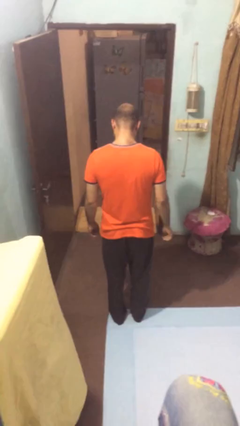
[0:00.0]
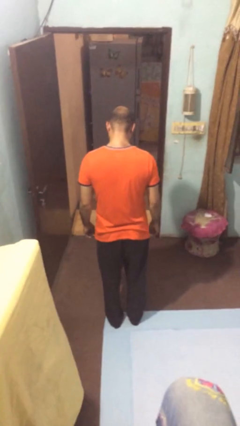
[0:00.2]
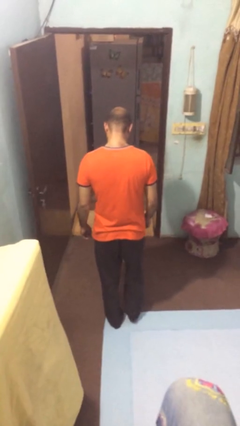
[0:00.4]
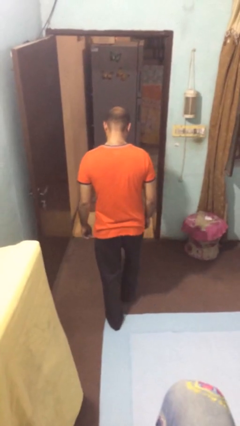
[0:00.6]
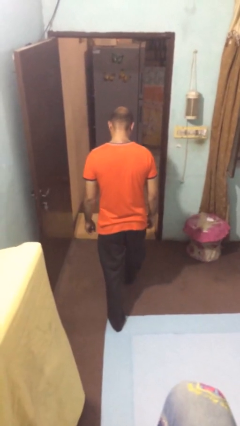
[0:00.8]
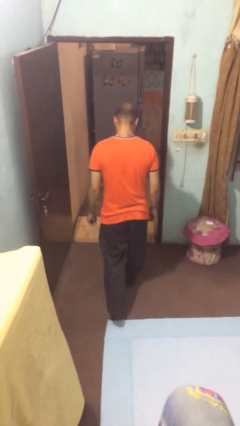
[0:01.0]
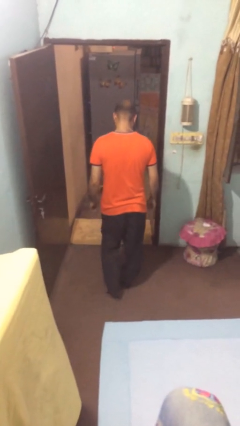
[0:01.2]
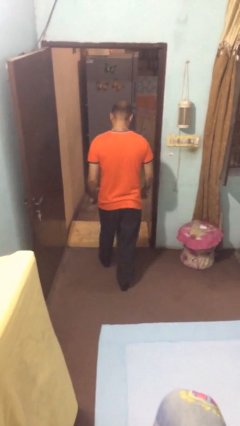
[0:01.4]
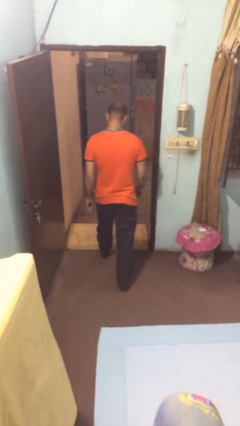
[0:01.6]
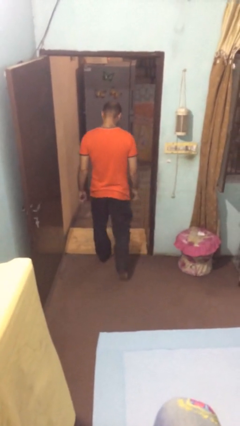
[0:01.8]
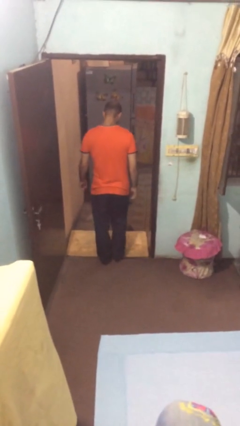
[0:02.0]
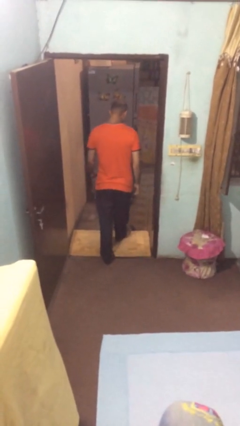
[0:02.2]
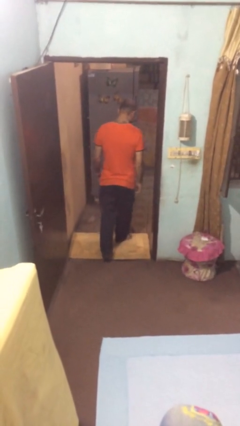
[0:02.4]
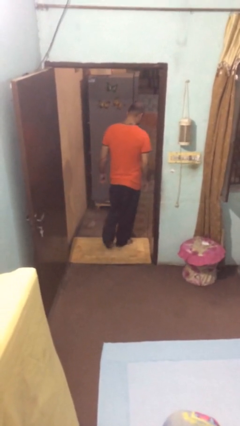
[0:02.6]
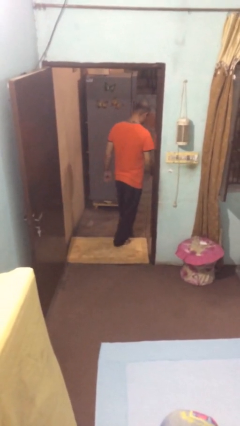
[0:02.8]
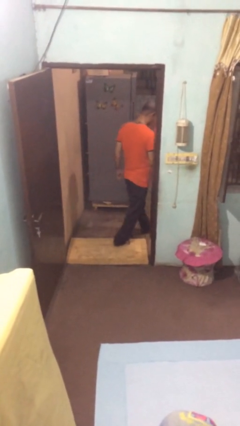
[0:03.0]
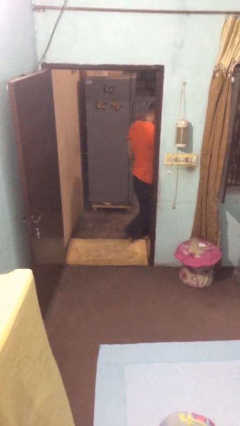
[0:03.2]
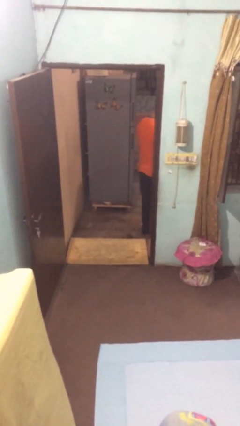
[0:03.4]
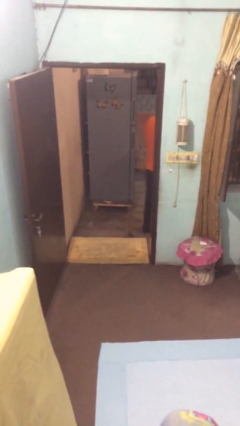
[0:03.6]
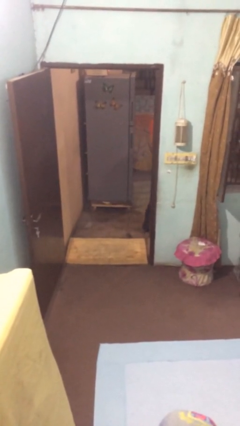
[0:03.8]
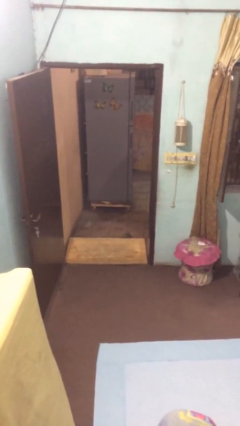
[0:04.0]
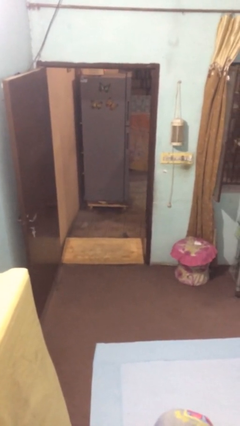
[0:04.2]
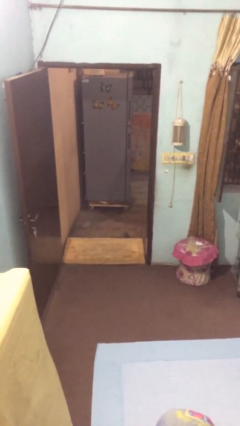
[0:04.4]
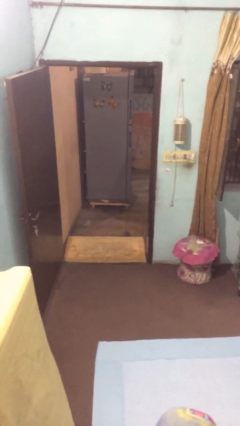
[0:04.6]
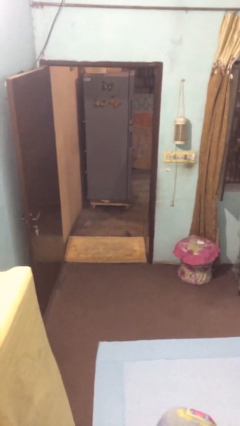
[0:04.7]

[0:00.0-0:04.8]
person exits scene through structure

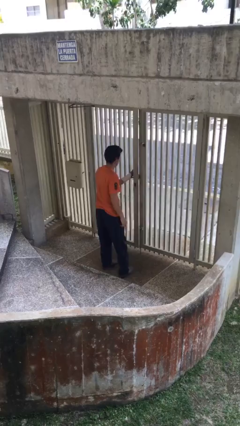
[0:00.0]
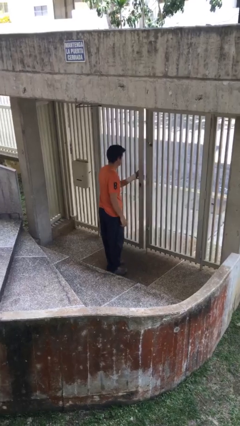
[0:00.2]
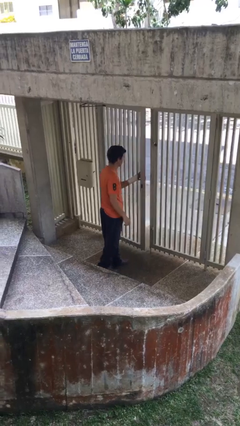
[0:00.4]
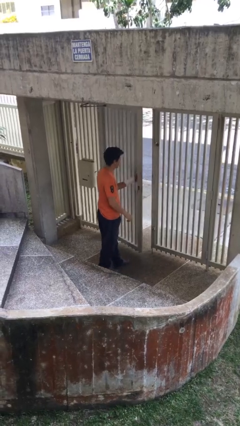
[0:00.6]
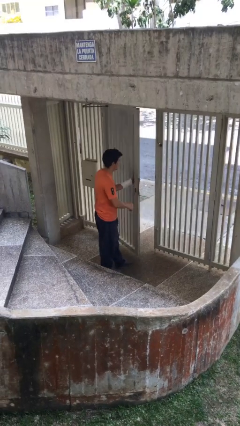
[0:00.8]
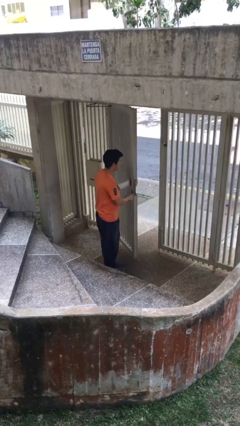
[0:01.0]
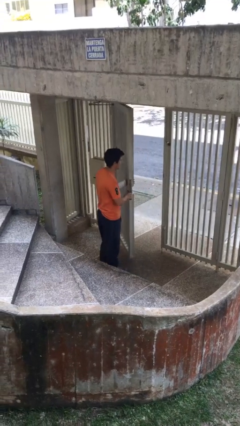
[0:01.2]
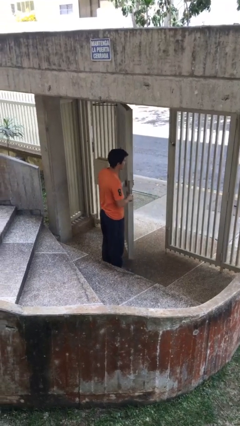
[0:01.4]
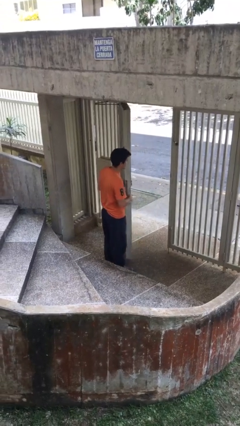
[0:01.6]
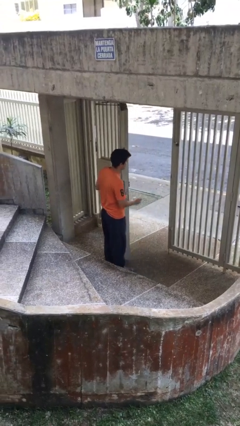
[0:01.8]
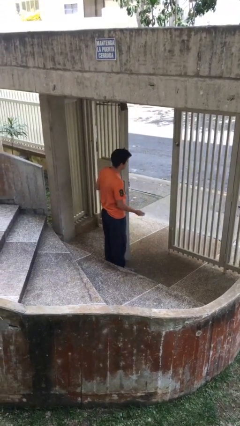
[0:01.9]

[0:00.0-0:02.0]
person opens facility door

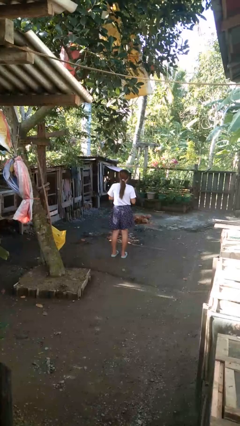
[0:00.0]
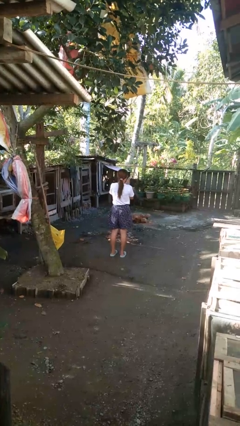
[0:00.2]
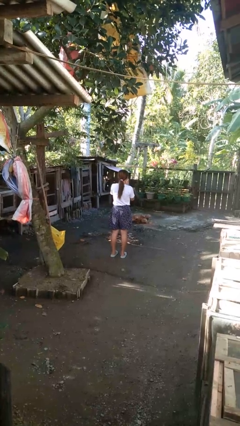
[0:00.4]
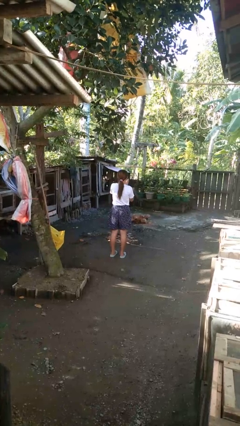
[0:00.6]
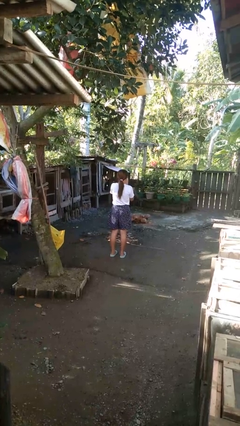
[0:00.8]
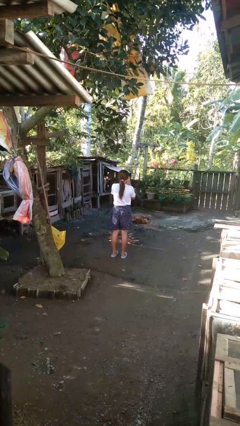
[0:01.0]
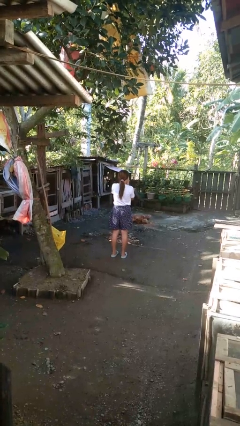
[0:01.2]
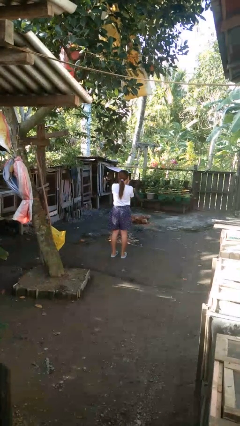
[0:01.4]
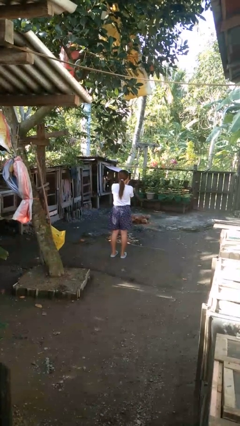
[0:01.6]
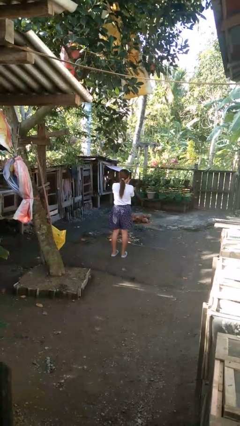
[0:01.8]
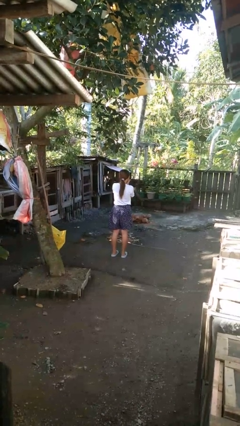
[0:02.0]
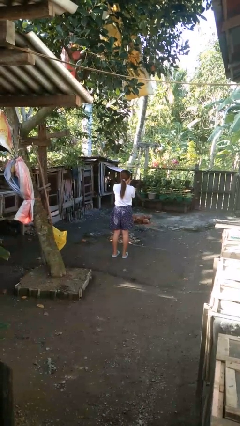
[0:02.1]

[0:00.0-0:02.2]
person blows into hands

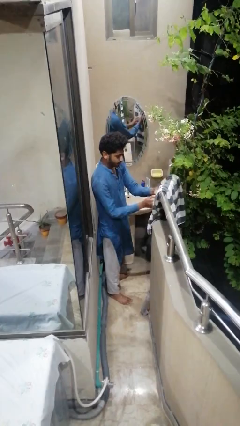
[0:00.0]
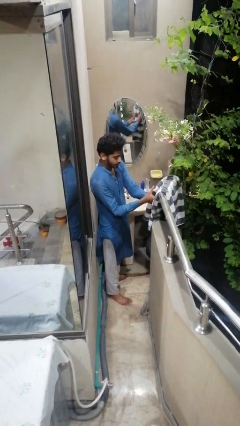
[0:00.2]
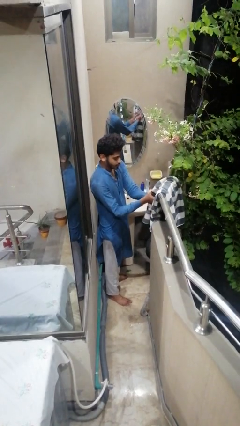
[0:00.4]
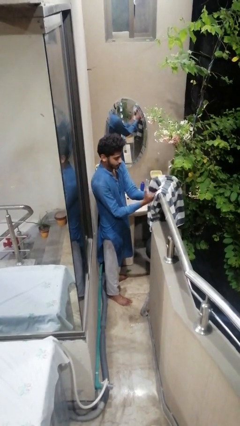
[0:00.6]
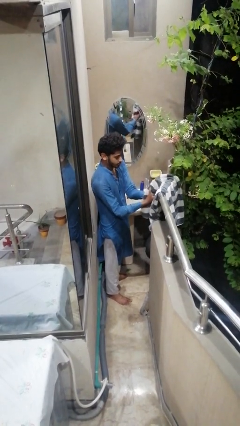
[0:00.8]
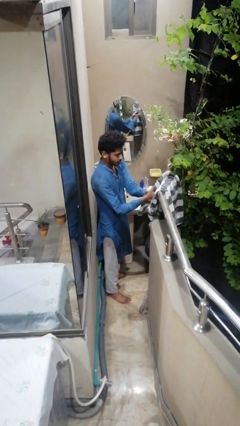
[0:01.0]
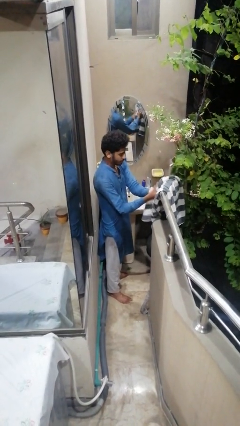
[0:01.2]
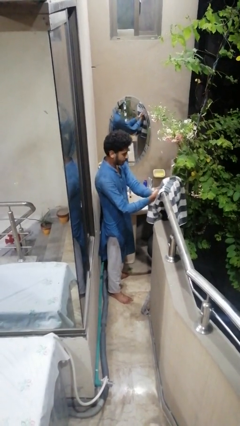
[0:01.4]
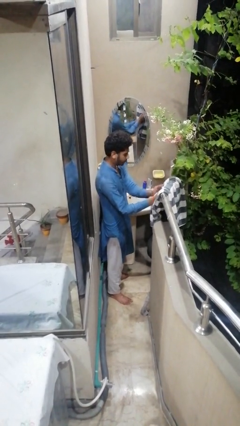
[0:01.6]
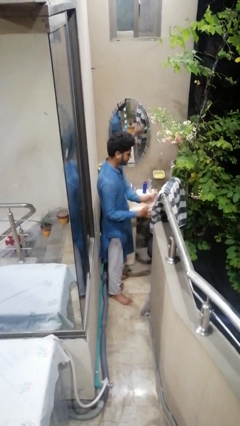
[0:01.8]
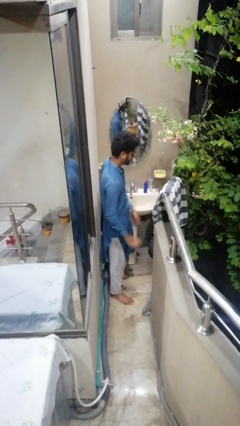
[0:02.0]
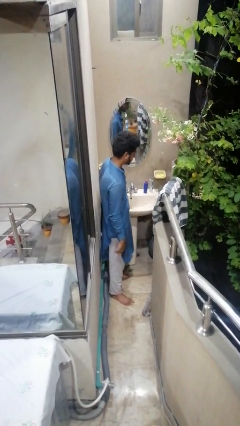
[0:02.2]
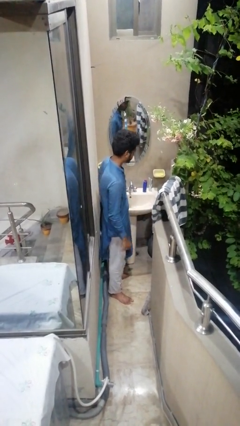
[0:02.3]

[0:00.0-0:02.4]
person dries hands with towel

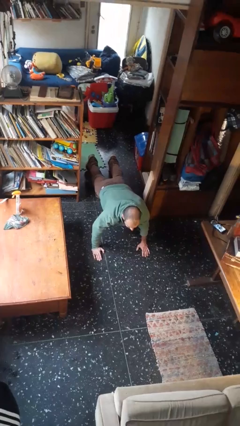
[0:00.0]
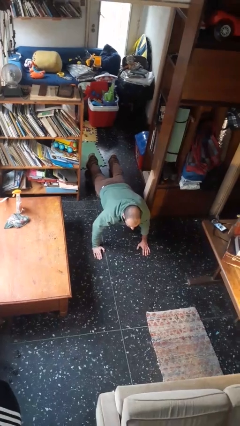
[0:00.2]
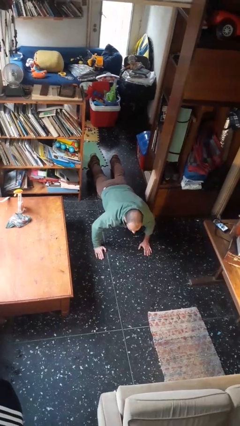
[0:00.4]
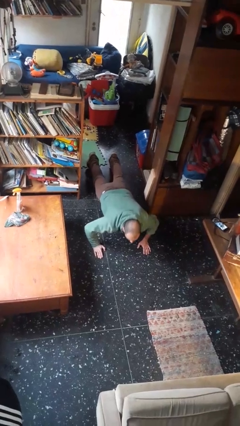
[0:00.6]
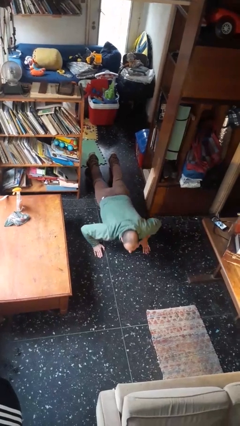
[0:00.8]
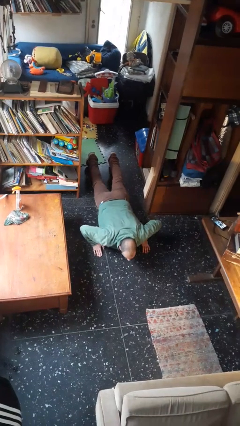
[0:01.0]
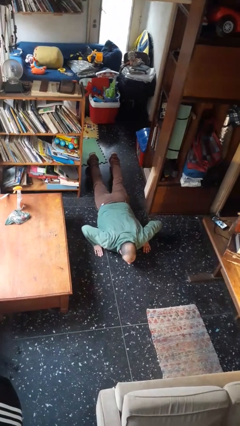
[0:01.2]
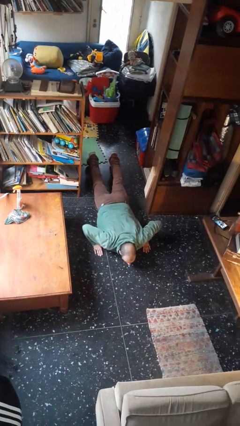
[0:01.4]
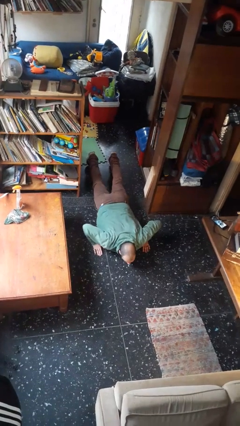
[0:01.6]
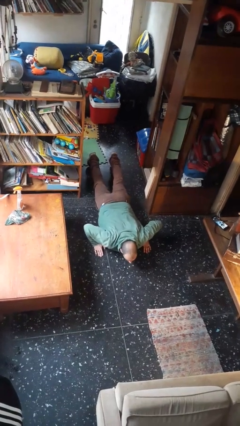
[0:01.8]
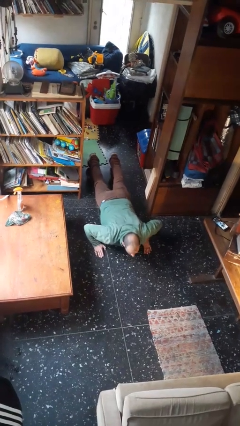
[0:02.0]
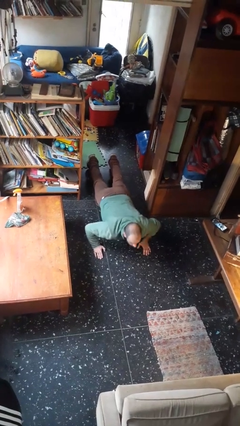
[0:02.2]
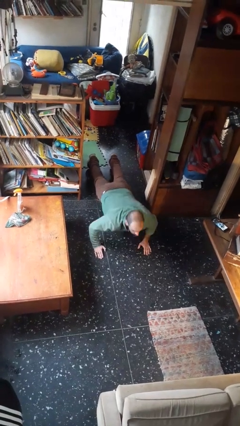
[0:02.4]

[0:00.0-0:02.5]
person exercises with pushup

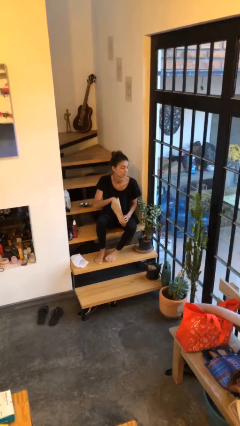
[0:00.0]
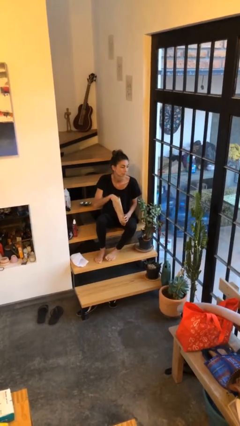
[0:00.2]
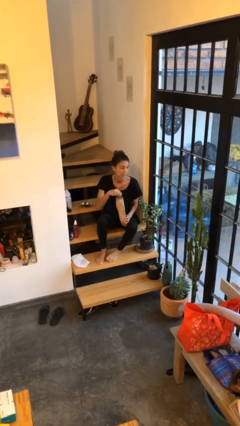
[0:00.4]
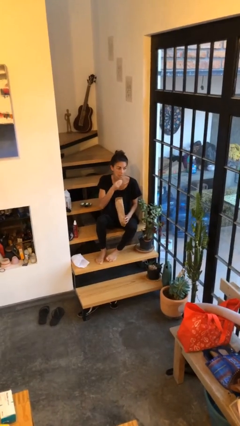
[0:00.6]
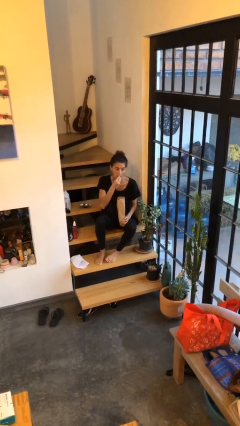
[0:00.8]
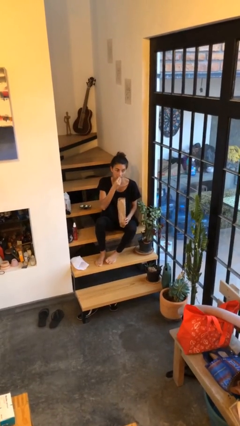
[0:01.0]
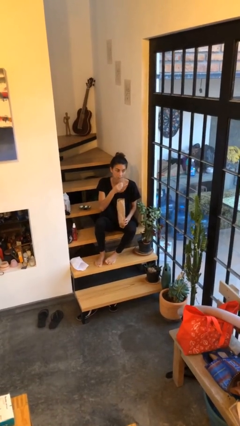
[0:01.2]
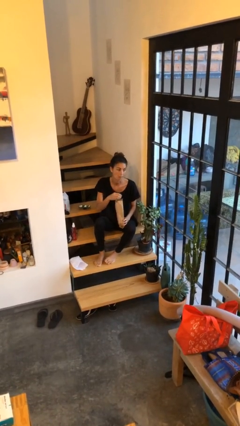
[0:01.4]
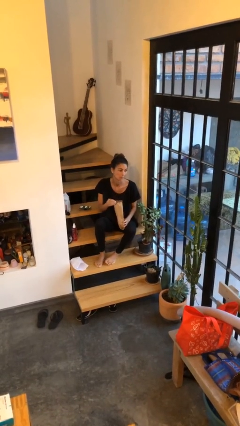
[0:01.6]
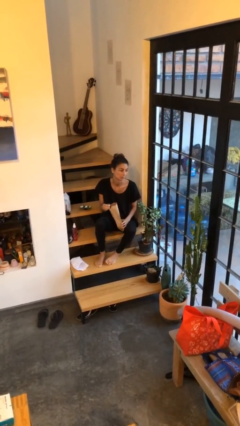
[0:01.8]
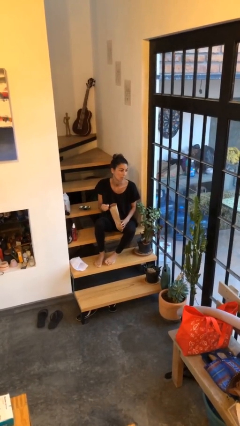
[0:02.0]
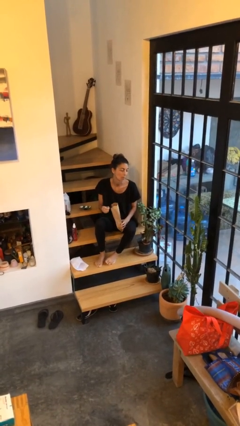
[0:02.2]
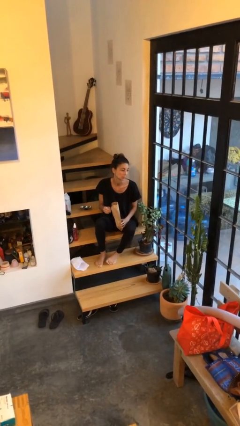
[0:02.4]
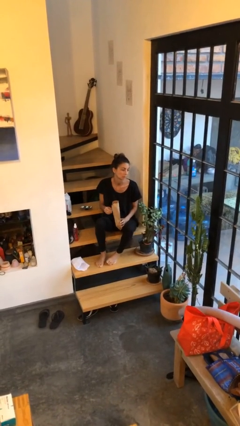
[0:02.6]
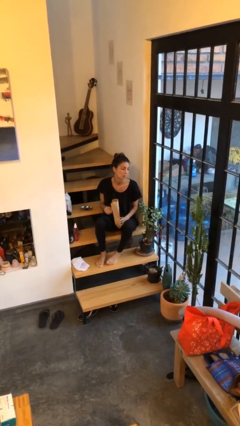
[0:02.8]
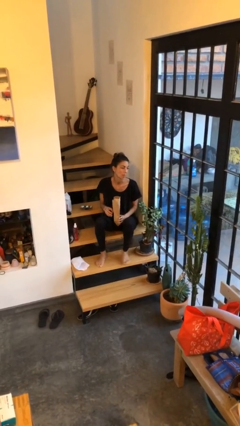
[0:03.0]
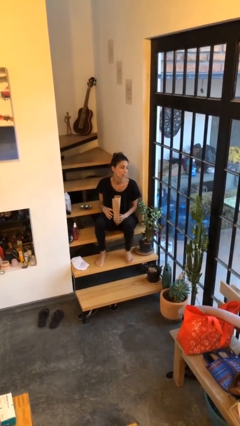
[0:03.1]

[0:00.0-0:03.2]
person eats snack from bag

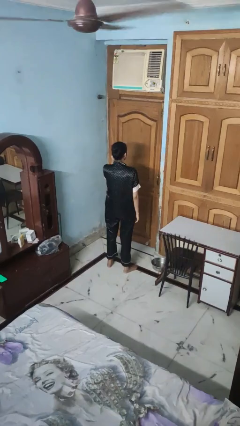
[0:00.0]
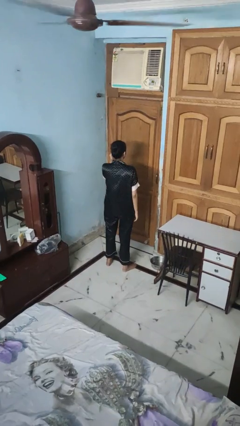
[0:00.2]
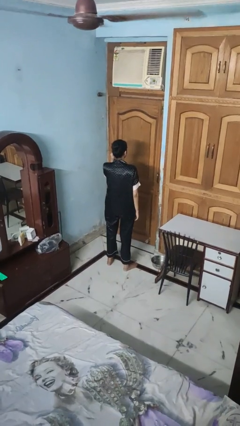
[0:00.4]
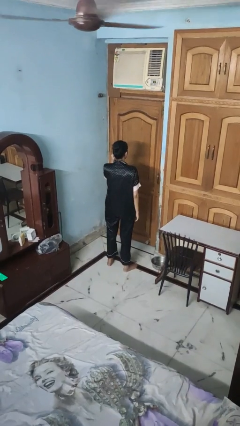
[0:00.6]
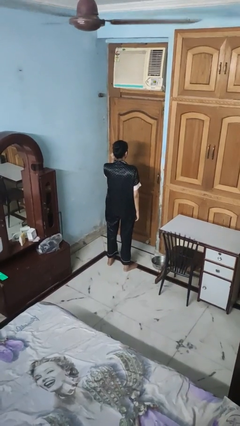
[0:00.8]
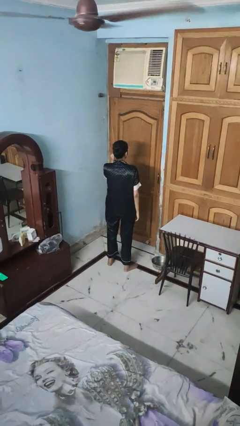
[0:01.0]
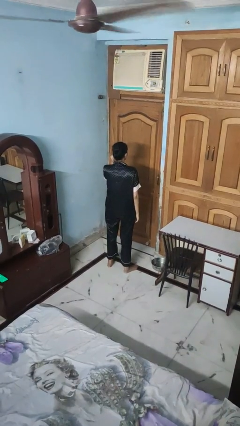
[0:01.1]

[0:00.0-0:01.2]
person touches earlobe
